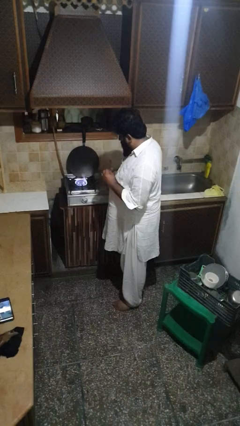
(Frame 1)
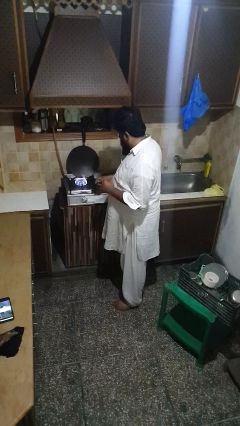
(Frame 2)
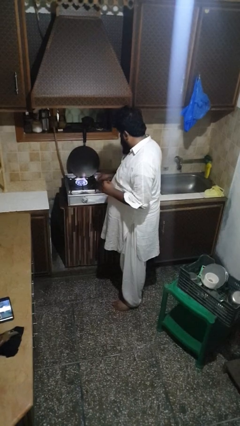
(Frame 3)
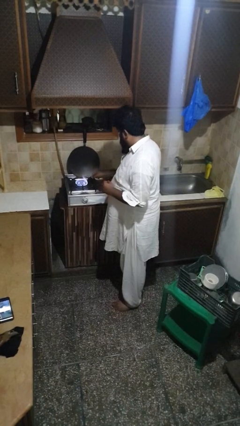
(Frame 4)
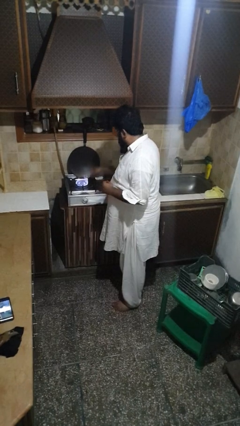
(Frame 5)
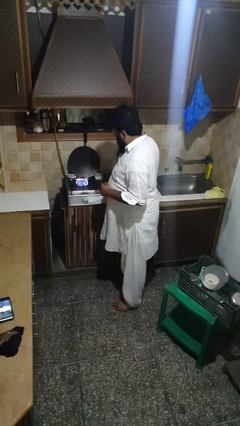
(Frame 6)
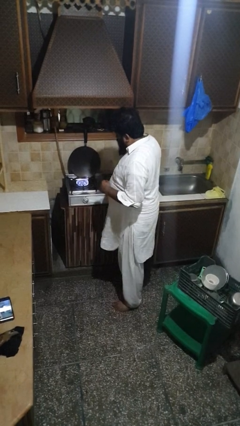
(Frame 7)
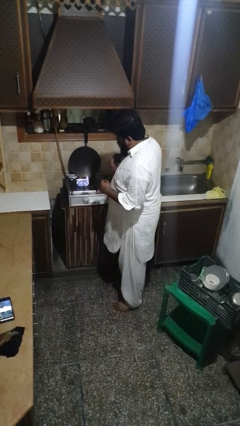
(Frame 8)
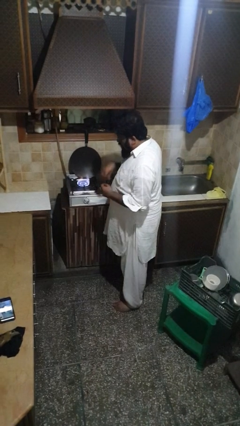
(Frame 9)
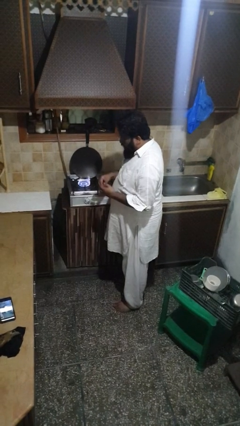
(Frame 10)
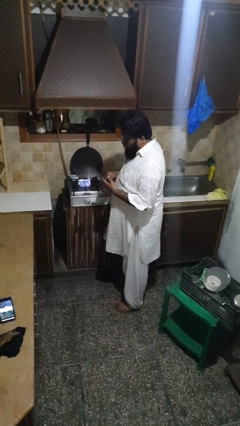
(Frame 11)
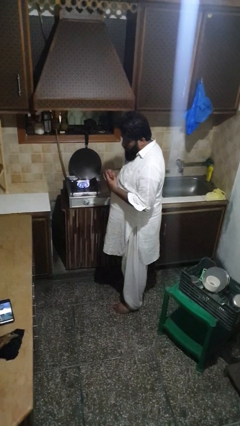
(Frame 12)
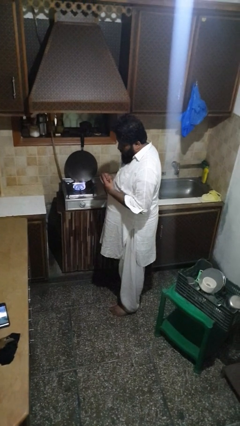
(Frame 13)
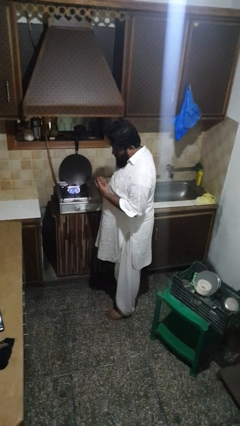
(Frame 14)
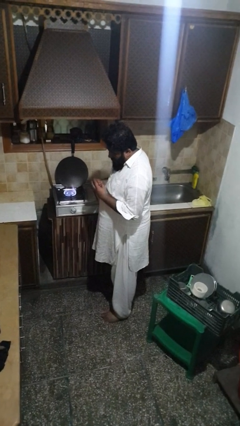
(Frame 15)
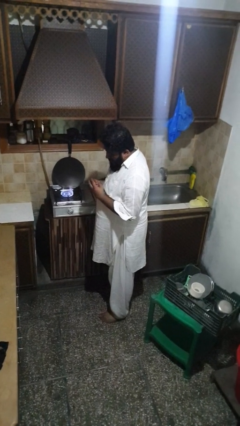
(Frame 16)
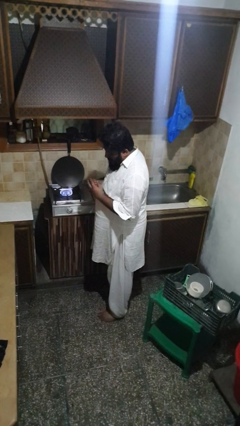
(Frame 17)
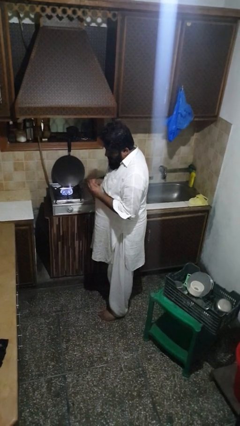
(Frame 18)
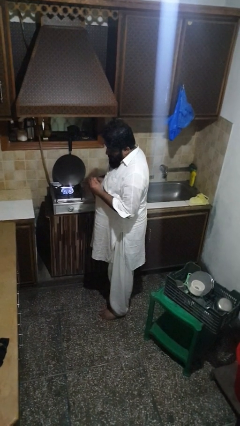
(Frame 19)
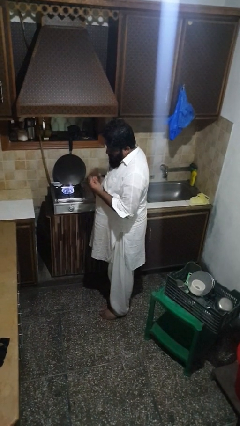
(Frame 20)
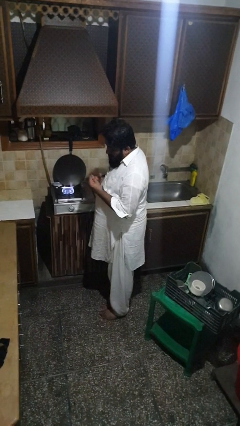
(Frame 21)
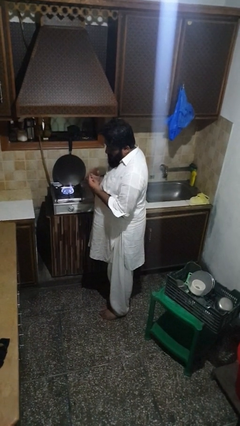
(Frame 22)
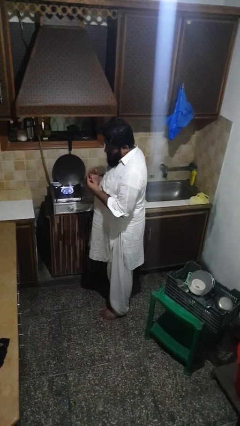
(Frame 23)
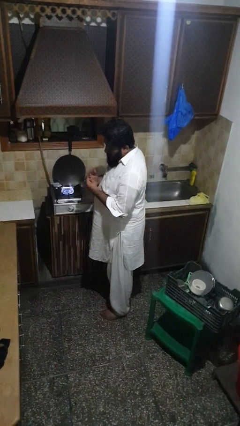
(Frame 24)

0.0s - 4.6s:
person burns hand

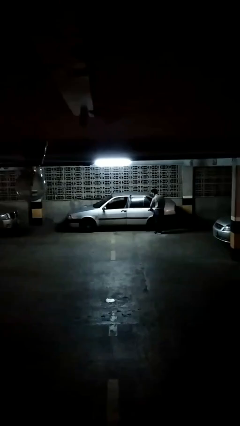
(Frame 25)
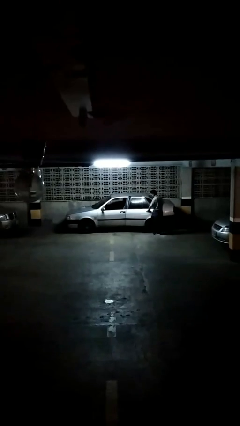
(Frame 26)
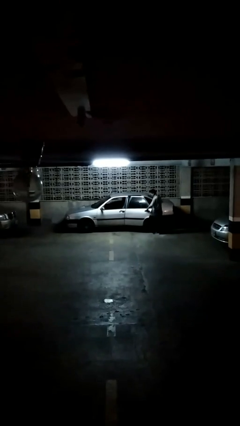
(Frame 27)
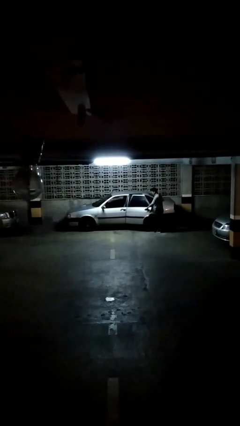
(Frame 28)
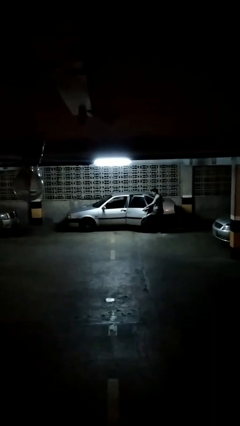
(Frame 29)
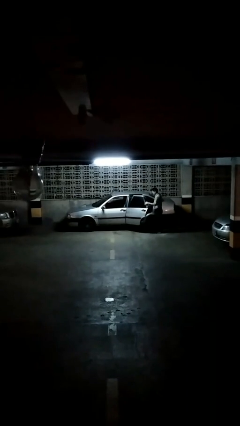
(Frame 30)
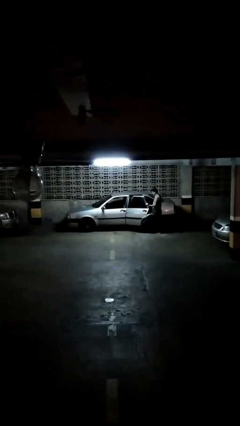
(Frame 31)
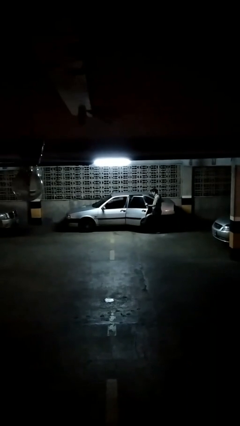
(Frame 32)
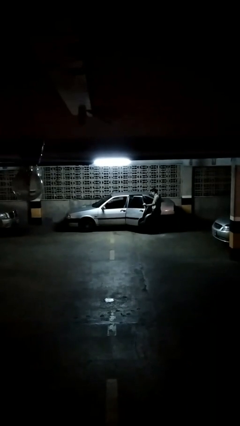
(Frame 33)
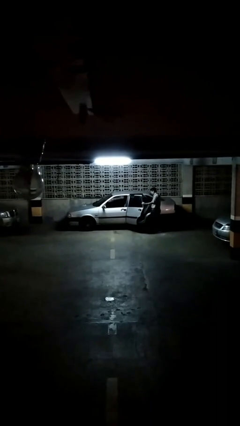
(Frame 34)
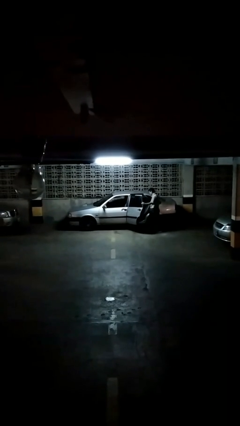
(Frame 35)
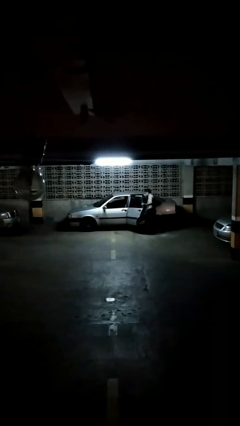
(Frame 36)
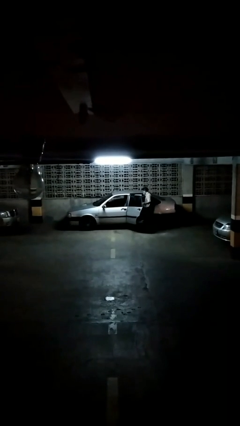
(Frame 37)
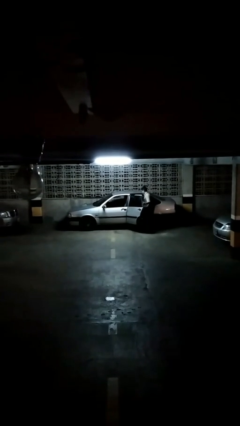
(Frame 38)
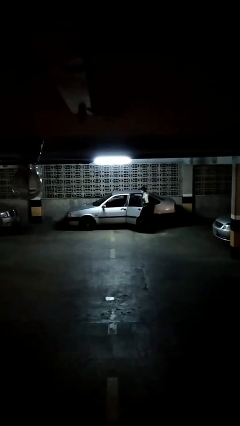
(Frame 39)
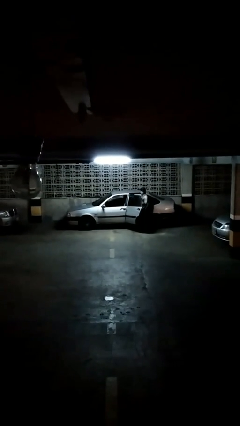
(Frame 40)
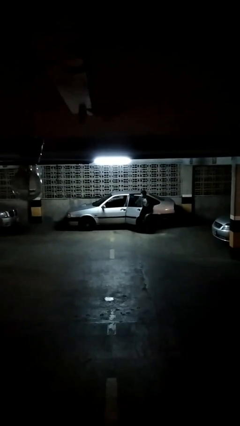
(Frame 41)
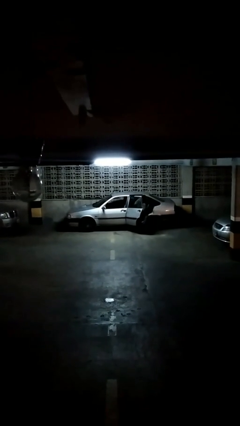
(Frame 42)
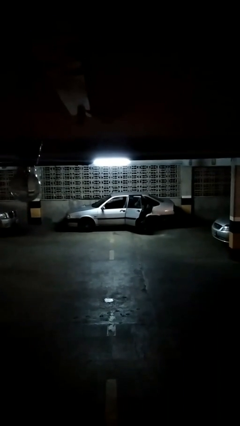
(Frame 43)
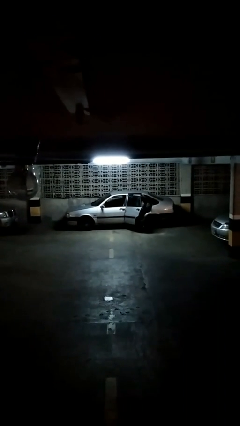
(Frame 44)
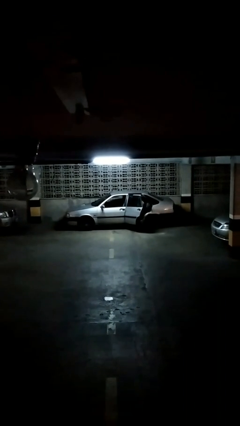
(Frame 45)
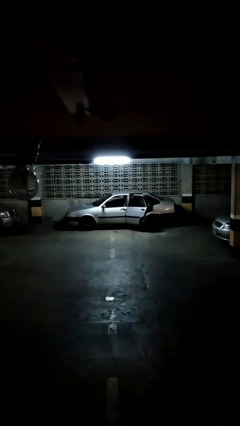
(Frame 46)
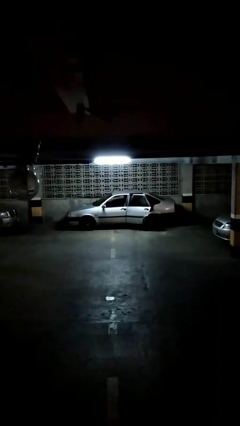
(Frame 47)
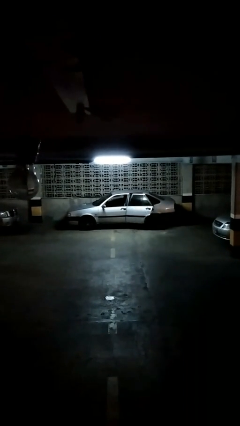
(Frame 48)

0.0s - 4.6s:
car picks up person

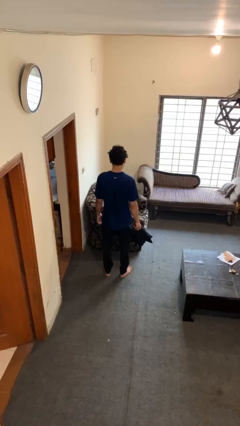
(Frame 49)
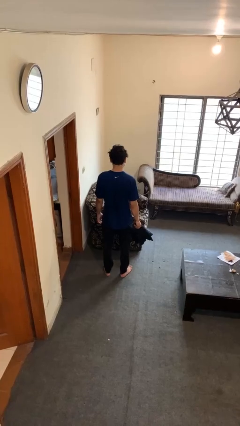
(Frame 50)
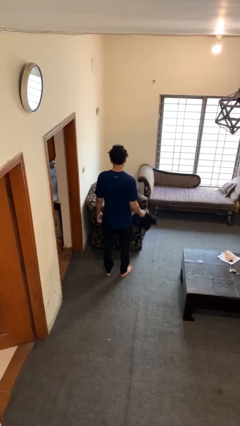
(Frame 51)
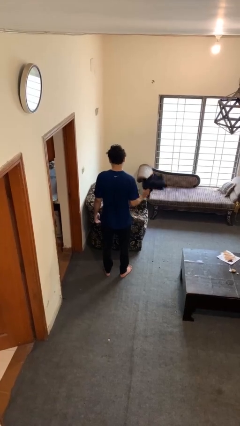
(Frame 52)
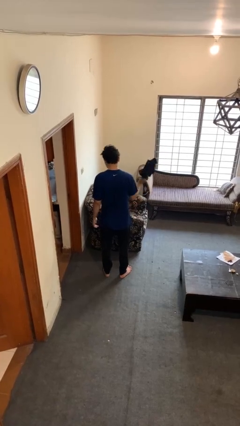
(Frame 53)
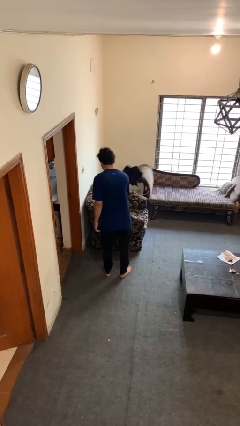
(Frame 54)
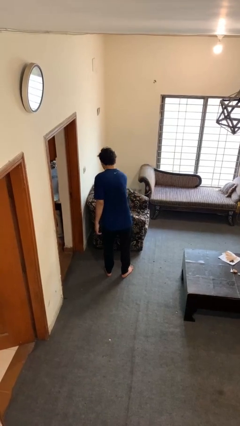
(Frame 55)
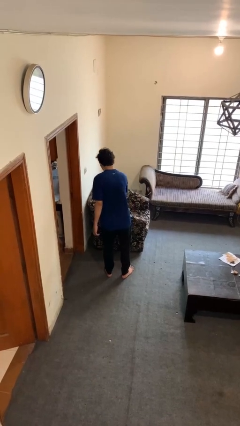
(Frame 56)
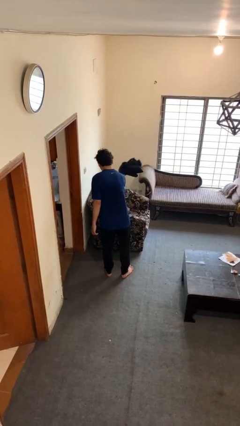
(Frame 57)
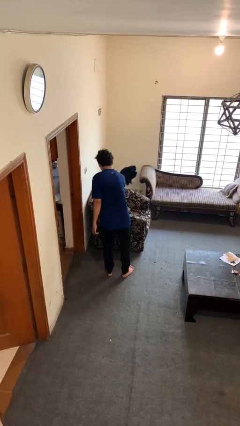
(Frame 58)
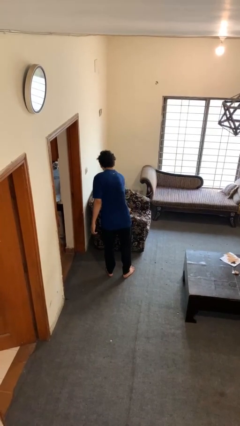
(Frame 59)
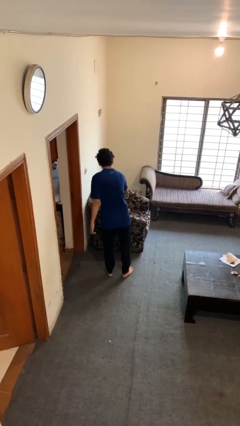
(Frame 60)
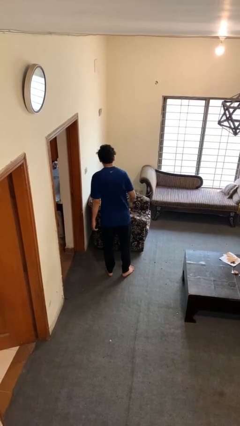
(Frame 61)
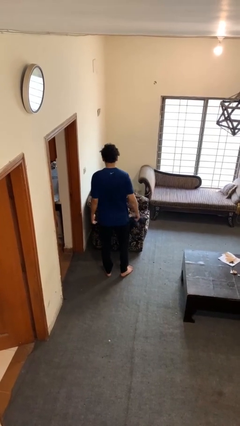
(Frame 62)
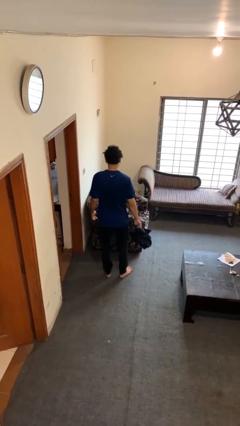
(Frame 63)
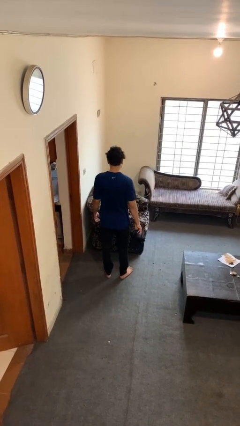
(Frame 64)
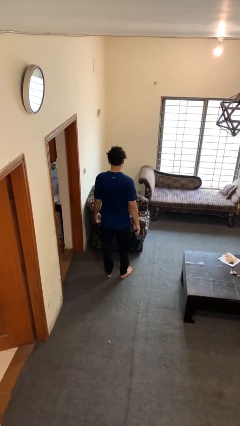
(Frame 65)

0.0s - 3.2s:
person dusts furniture

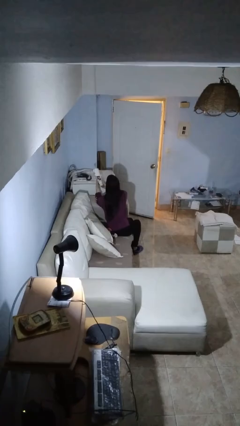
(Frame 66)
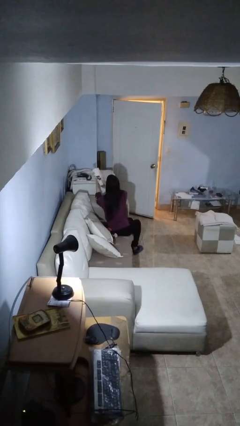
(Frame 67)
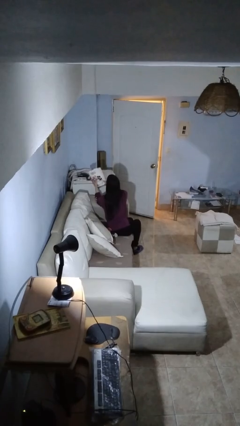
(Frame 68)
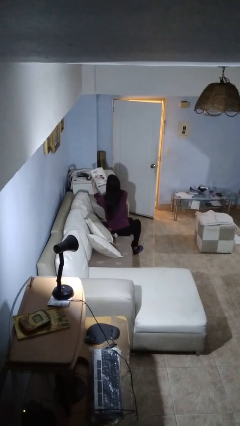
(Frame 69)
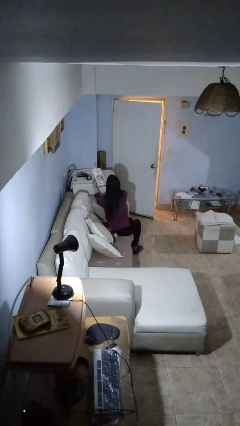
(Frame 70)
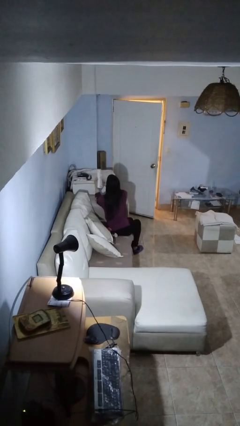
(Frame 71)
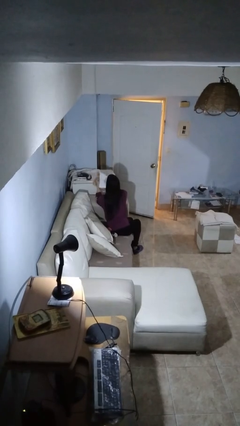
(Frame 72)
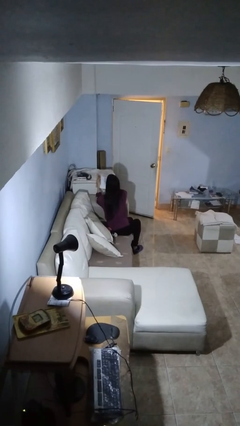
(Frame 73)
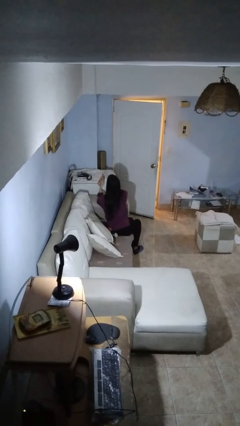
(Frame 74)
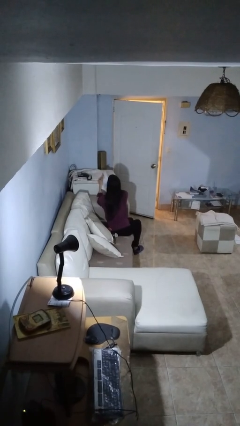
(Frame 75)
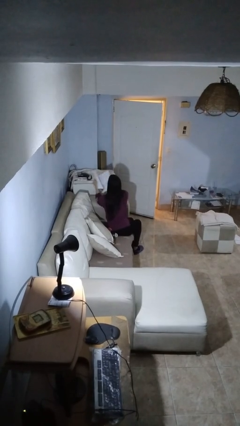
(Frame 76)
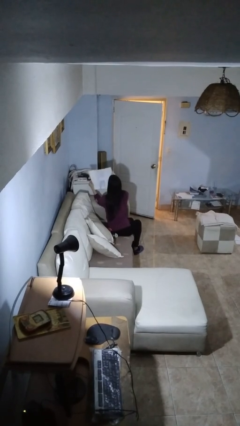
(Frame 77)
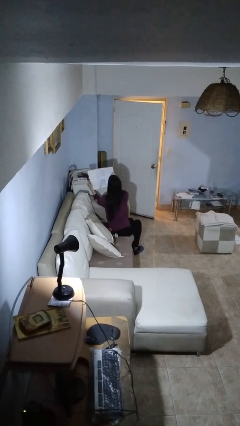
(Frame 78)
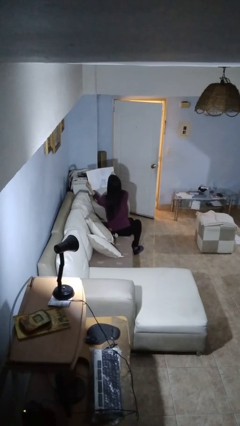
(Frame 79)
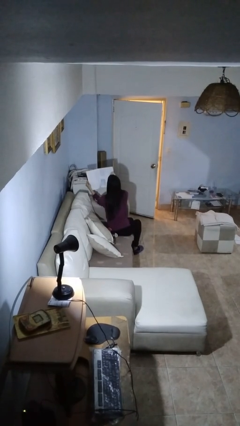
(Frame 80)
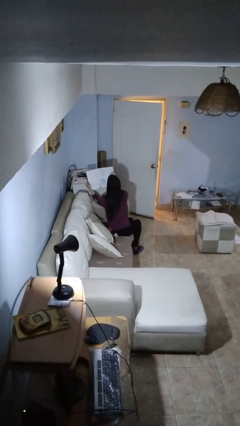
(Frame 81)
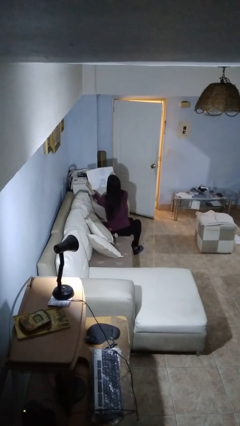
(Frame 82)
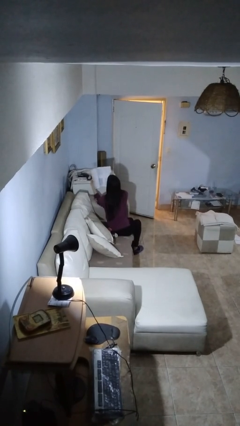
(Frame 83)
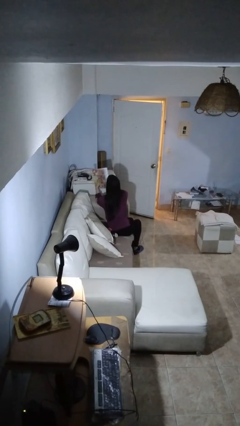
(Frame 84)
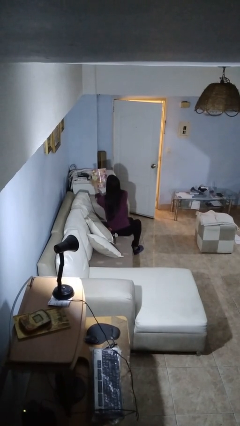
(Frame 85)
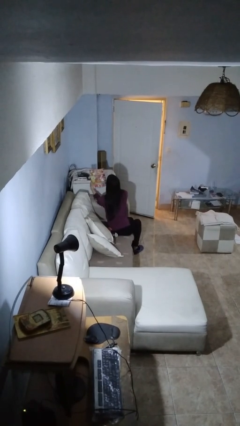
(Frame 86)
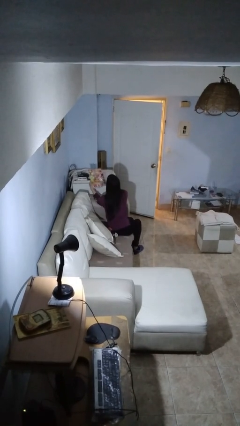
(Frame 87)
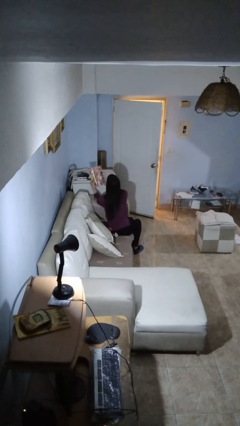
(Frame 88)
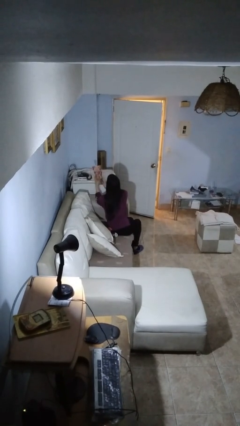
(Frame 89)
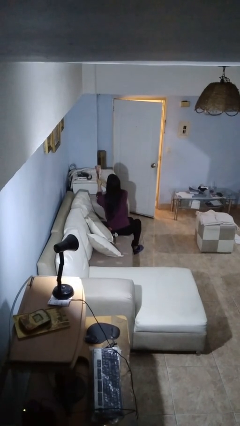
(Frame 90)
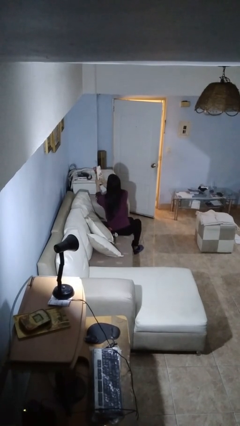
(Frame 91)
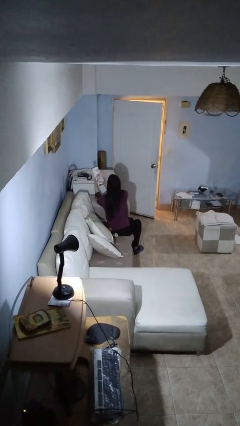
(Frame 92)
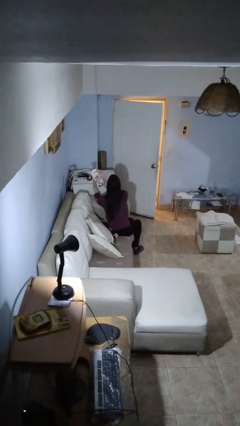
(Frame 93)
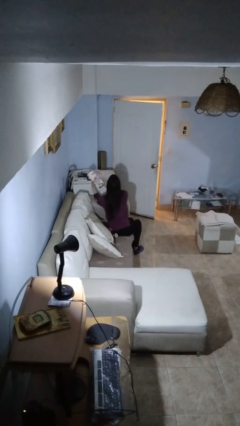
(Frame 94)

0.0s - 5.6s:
person reads magazine
